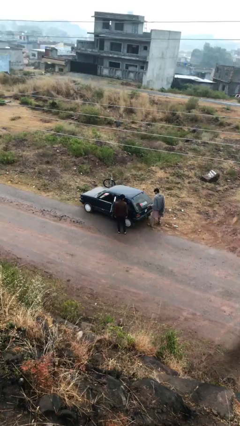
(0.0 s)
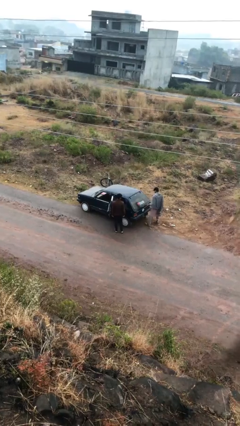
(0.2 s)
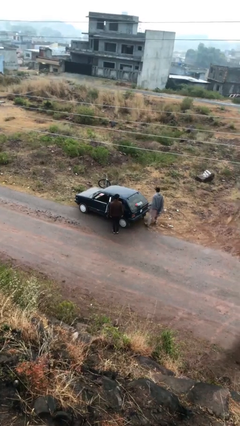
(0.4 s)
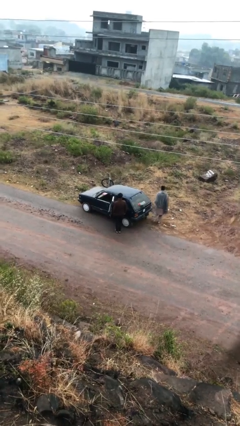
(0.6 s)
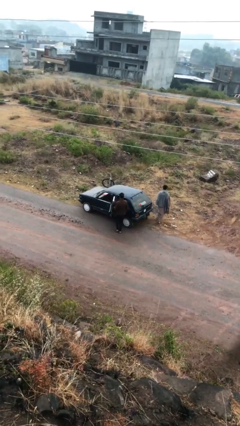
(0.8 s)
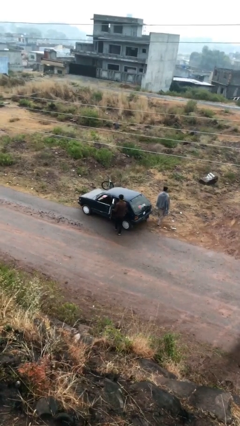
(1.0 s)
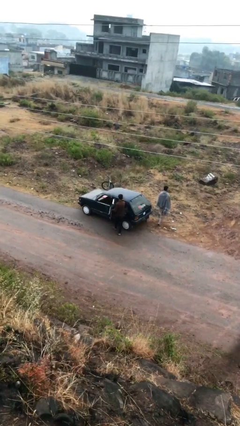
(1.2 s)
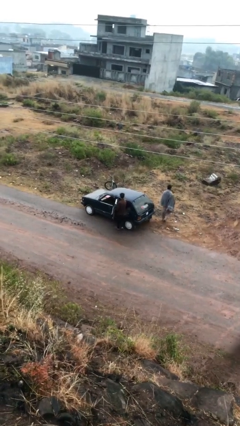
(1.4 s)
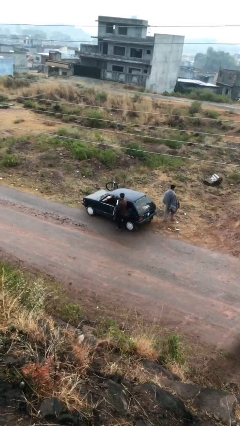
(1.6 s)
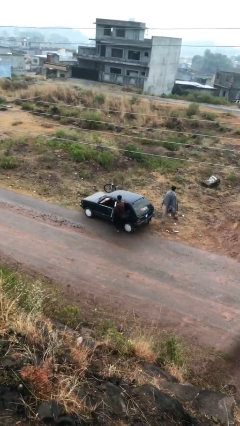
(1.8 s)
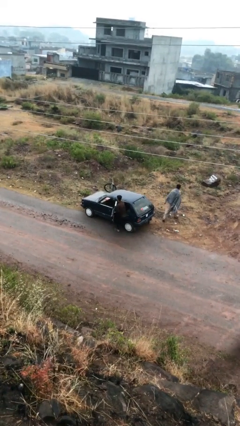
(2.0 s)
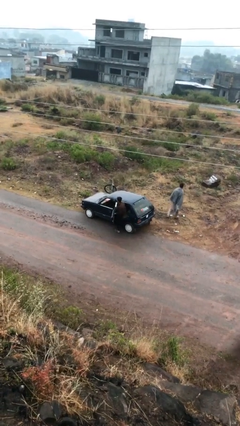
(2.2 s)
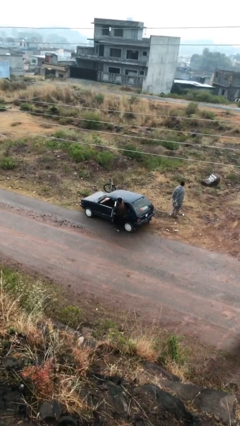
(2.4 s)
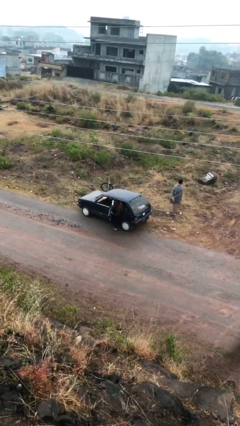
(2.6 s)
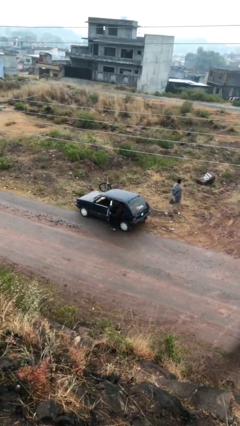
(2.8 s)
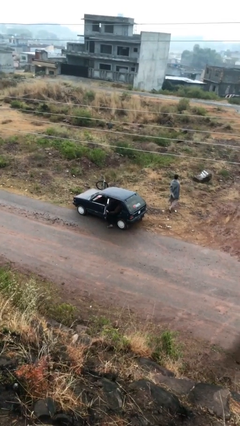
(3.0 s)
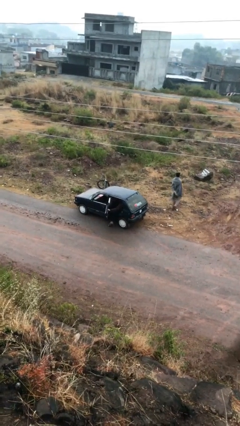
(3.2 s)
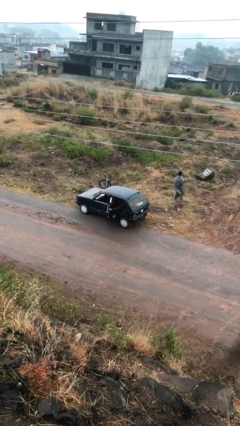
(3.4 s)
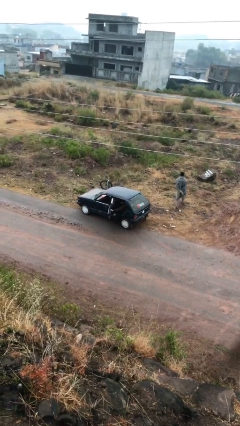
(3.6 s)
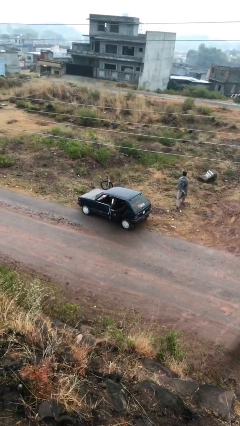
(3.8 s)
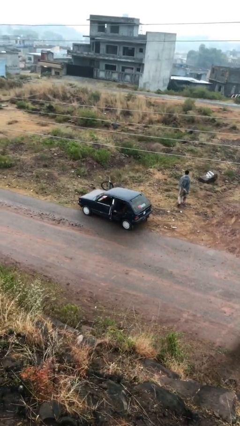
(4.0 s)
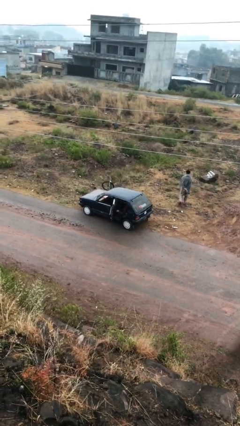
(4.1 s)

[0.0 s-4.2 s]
person enters car

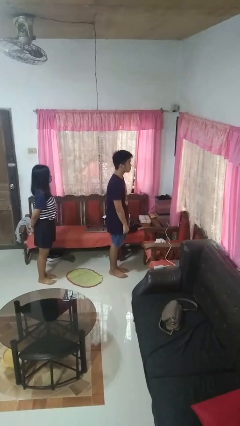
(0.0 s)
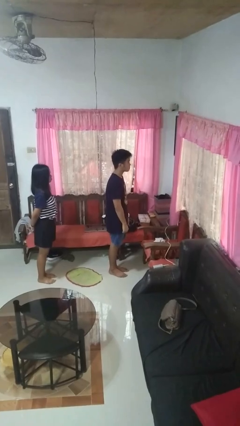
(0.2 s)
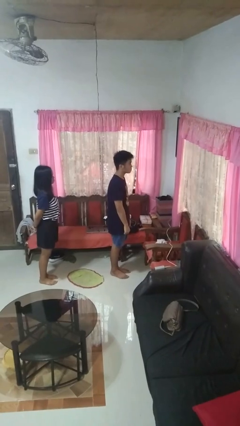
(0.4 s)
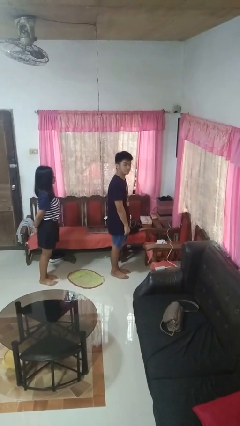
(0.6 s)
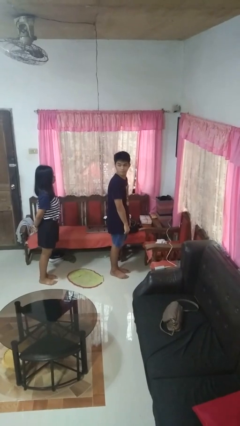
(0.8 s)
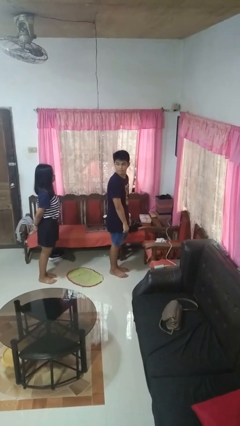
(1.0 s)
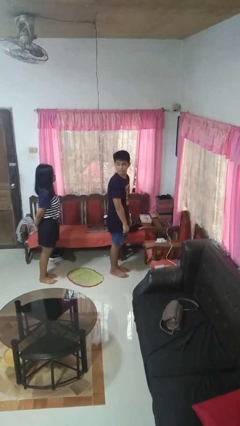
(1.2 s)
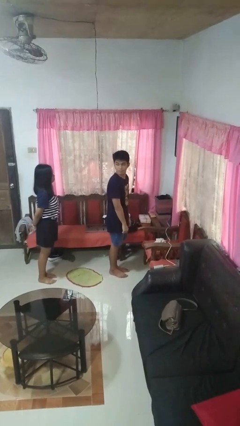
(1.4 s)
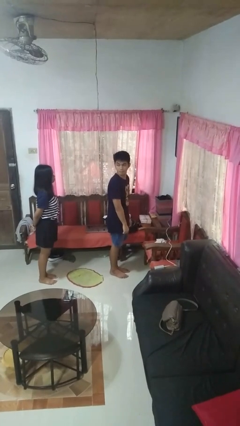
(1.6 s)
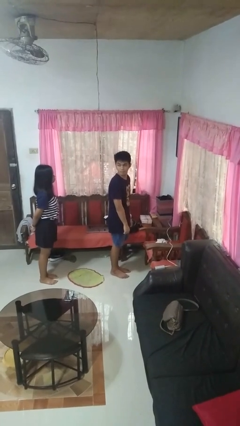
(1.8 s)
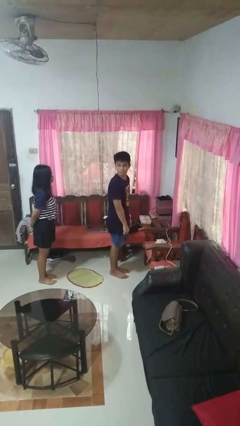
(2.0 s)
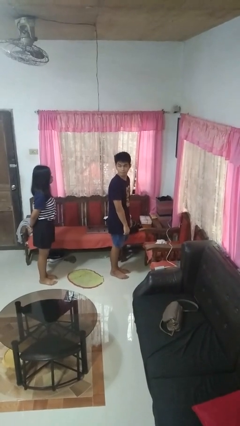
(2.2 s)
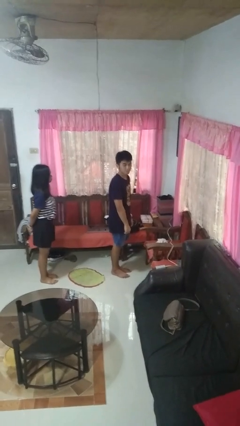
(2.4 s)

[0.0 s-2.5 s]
person looks over shoulder

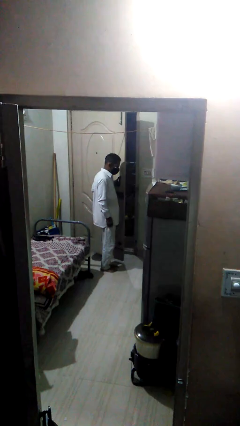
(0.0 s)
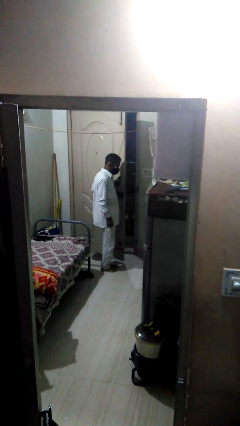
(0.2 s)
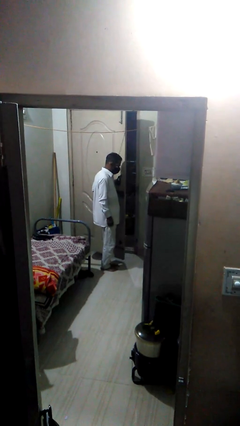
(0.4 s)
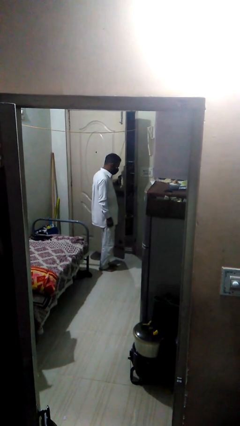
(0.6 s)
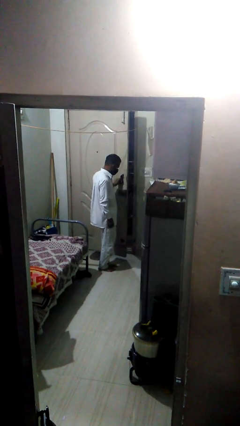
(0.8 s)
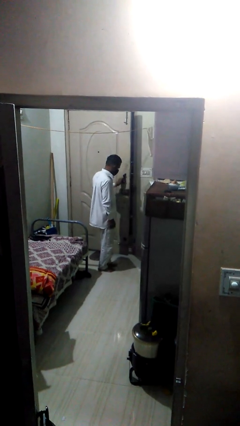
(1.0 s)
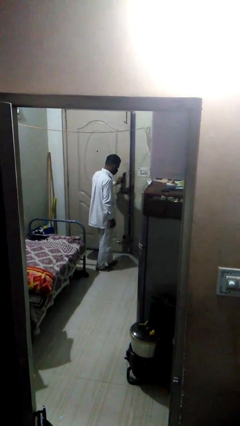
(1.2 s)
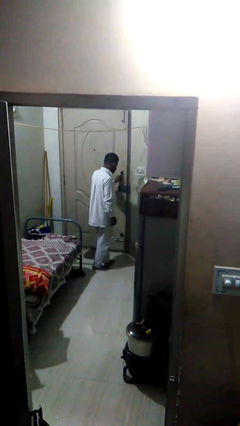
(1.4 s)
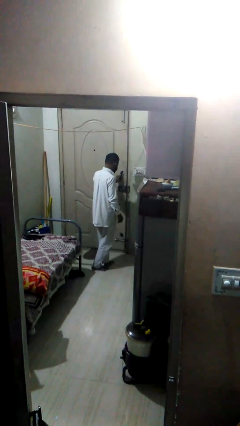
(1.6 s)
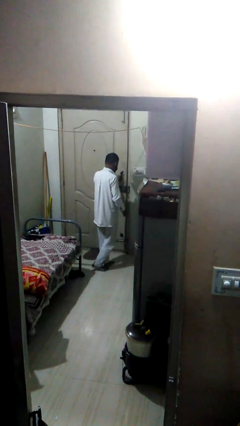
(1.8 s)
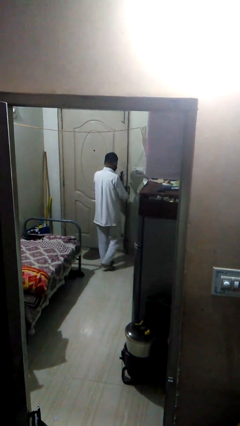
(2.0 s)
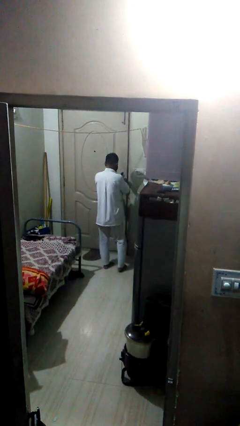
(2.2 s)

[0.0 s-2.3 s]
person closes facility door

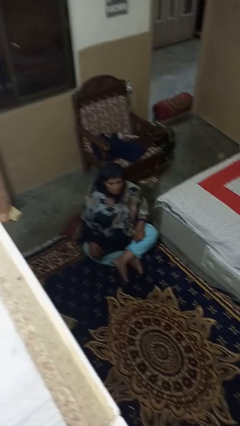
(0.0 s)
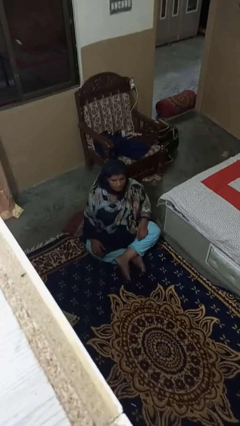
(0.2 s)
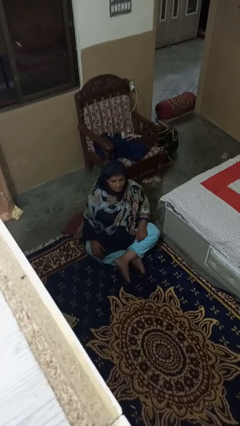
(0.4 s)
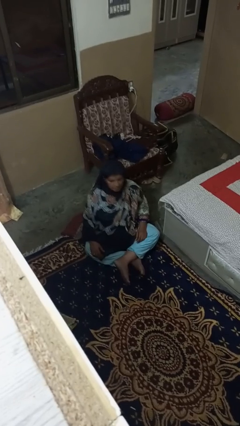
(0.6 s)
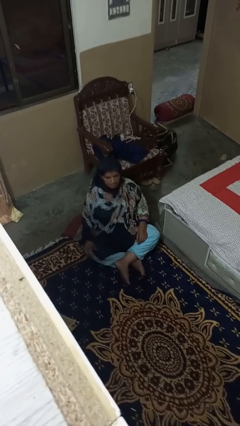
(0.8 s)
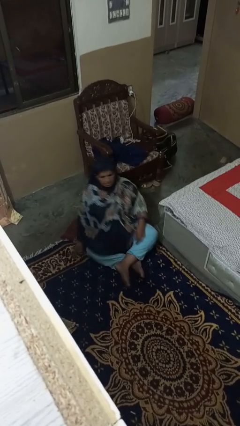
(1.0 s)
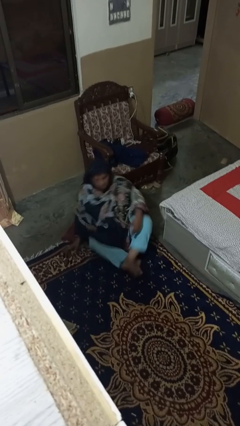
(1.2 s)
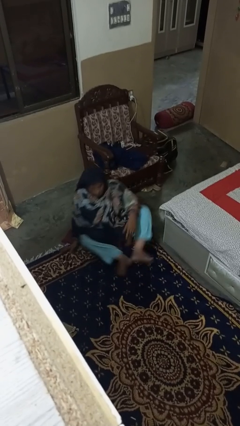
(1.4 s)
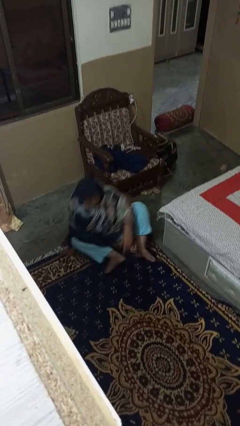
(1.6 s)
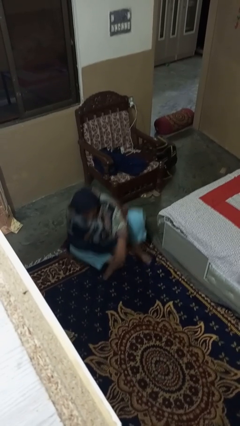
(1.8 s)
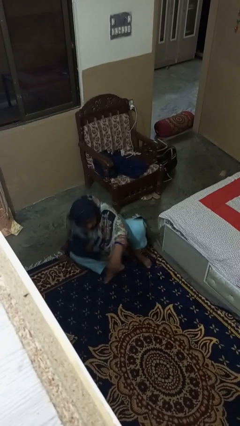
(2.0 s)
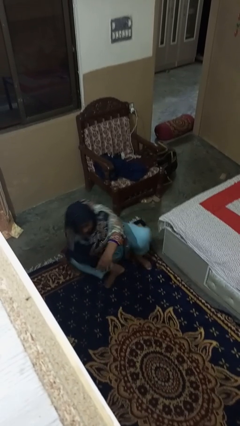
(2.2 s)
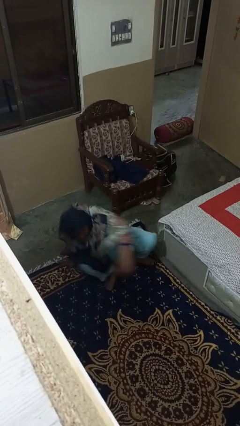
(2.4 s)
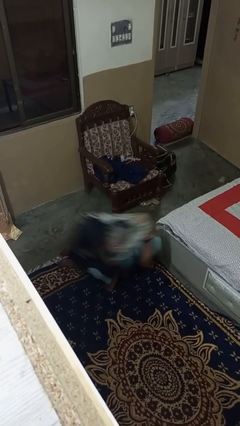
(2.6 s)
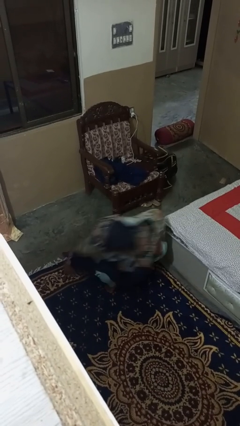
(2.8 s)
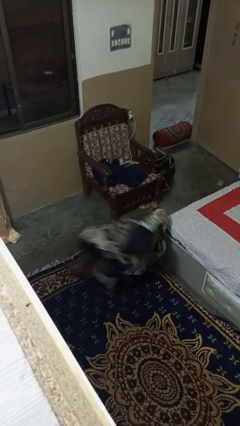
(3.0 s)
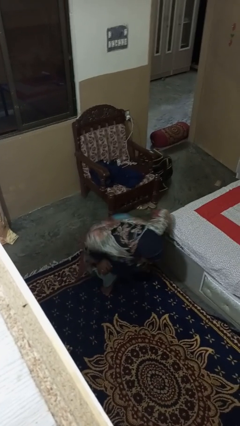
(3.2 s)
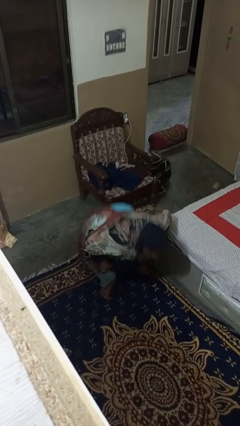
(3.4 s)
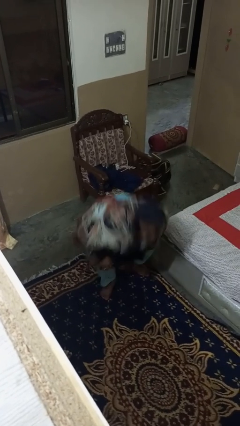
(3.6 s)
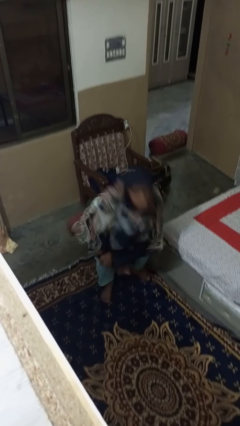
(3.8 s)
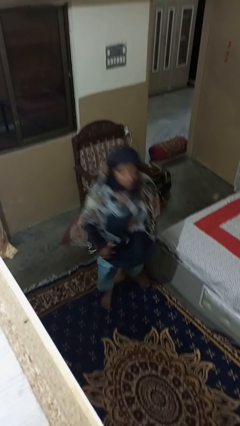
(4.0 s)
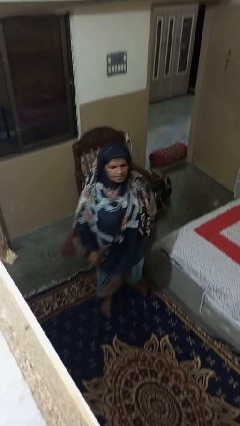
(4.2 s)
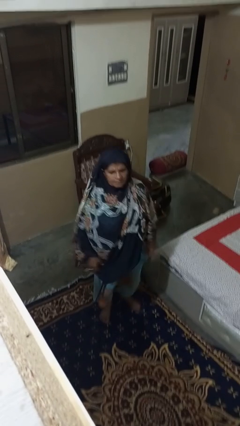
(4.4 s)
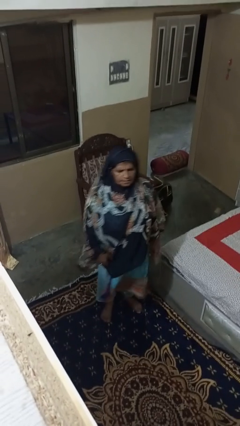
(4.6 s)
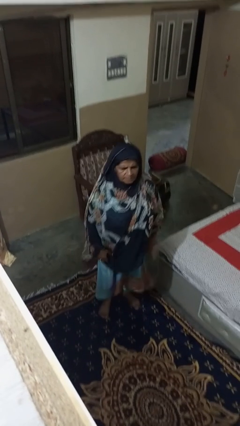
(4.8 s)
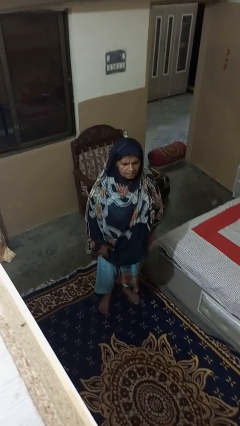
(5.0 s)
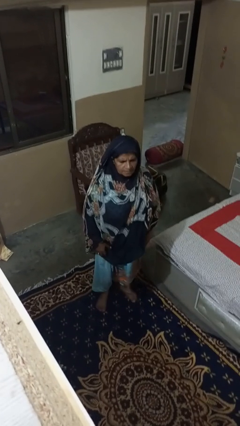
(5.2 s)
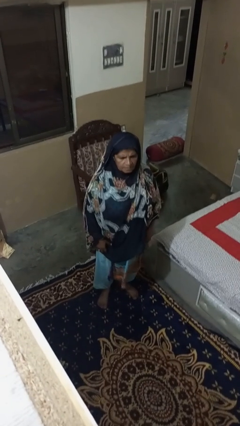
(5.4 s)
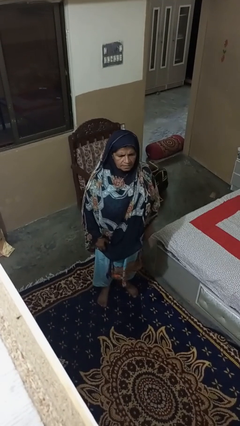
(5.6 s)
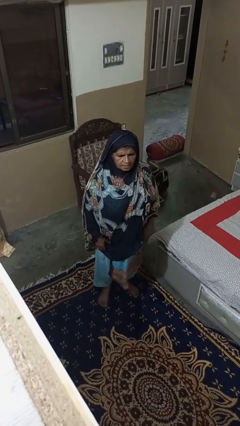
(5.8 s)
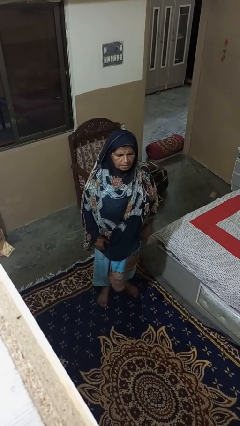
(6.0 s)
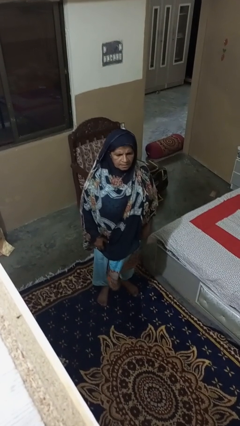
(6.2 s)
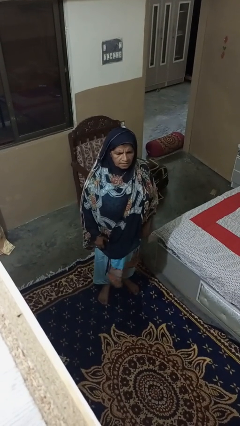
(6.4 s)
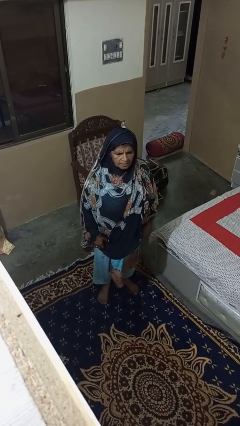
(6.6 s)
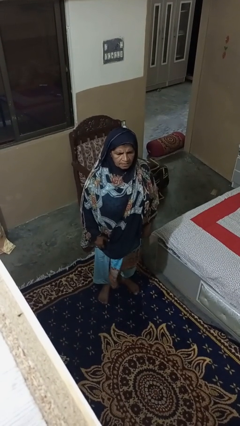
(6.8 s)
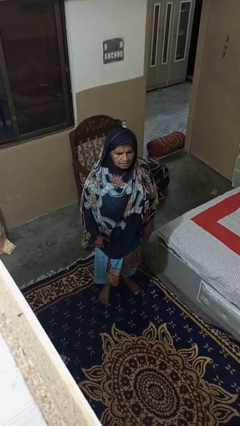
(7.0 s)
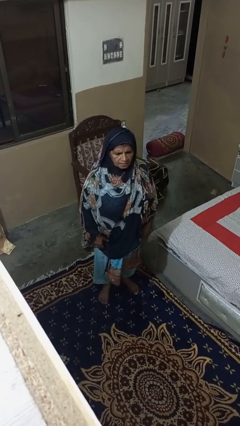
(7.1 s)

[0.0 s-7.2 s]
person stands up from floor

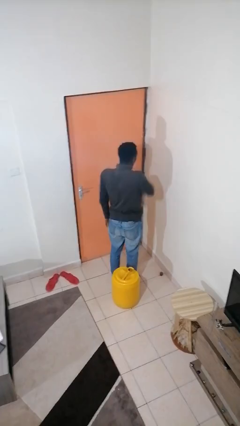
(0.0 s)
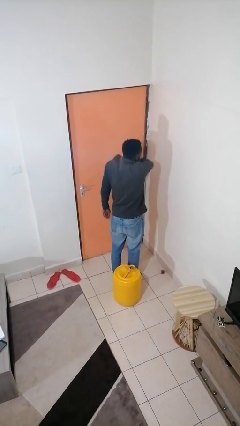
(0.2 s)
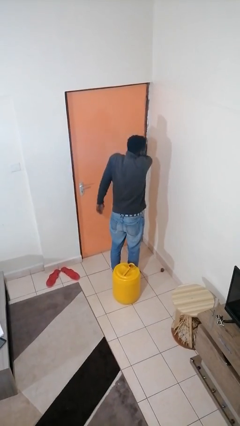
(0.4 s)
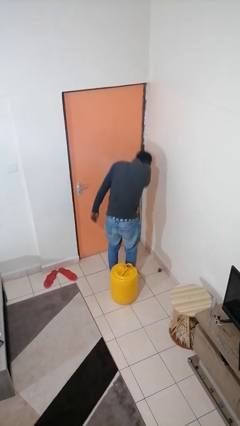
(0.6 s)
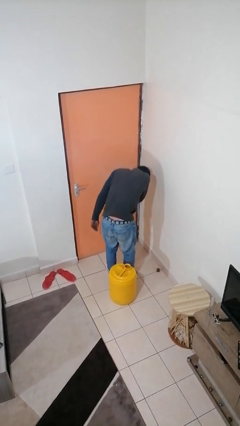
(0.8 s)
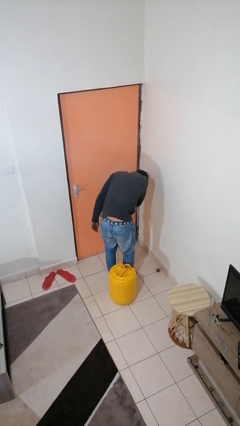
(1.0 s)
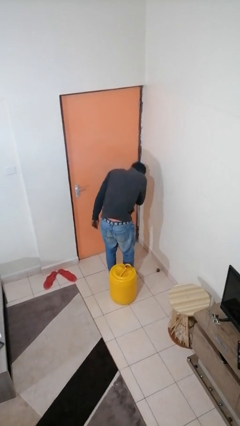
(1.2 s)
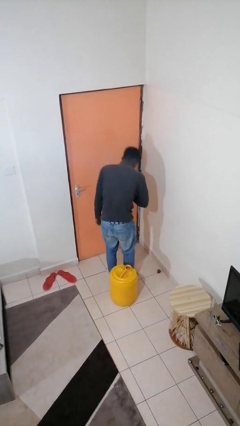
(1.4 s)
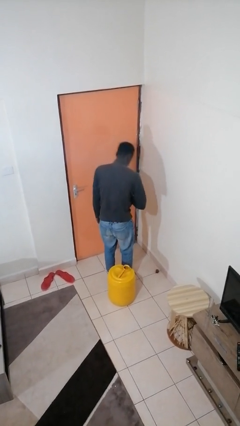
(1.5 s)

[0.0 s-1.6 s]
person sneezes into arm

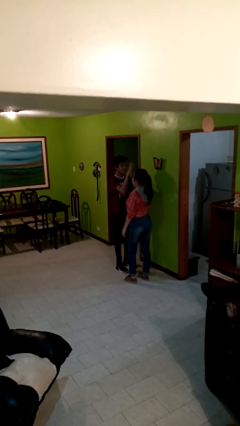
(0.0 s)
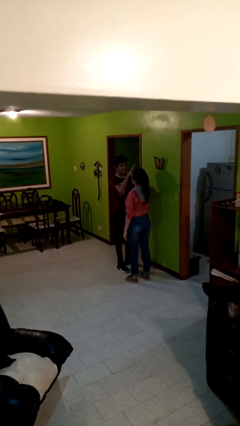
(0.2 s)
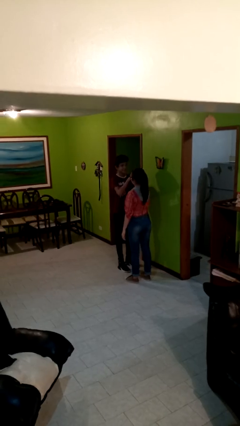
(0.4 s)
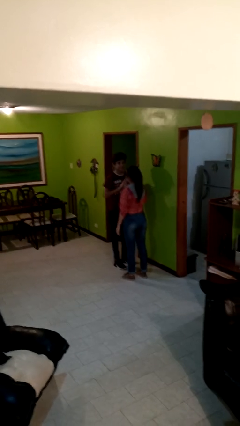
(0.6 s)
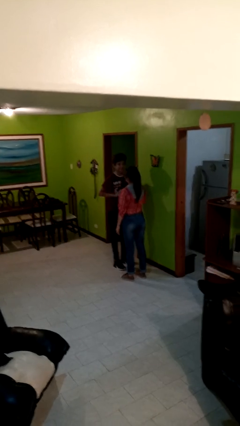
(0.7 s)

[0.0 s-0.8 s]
person highfives hand
